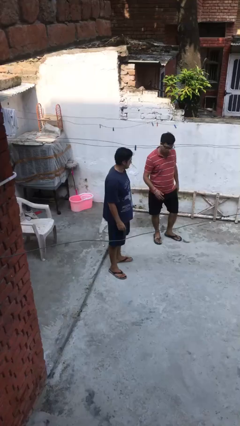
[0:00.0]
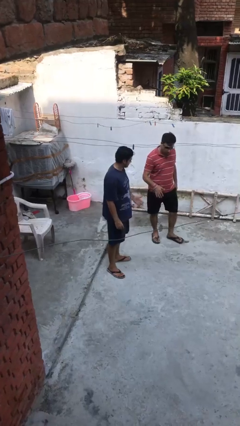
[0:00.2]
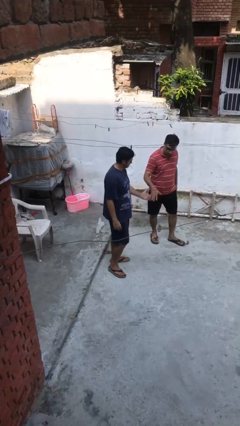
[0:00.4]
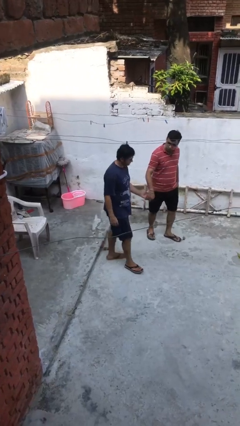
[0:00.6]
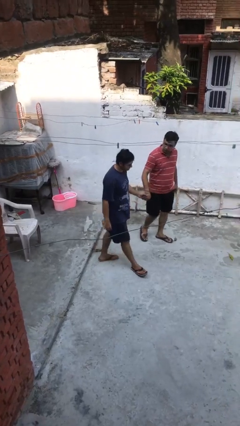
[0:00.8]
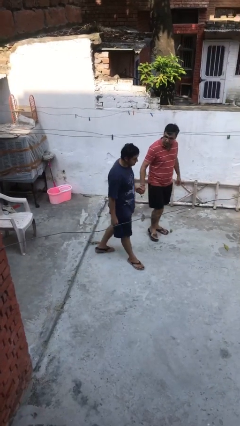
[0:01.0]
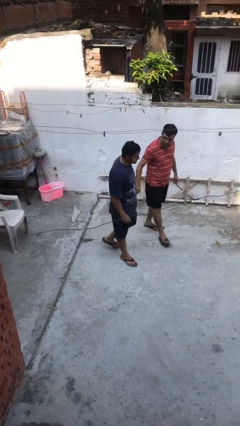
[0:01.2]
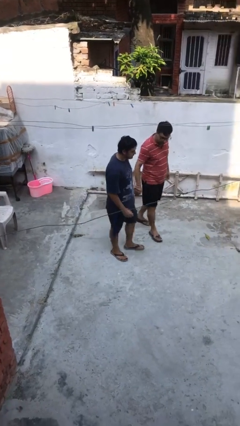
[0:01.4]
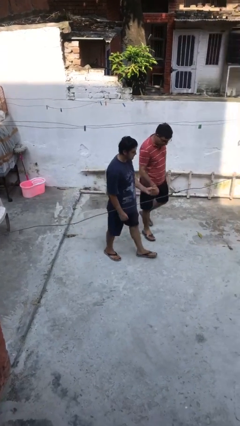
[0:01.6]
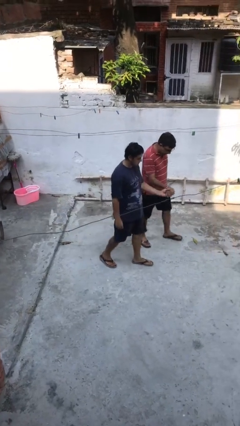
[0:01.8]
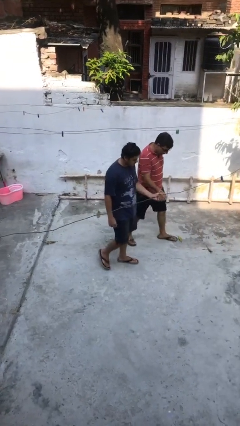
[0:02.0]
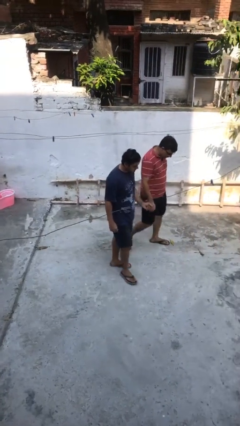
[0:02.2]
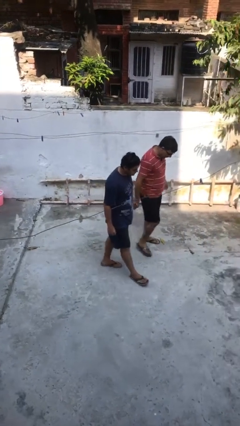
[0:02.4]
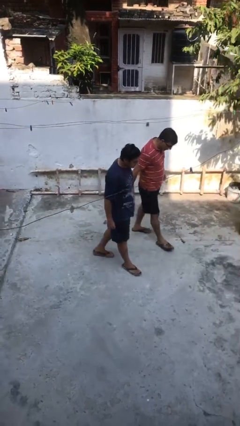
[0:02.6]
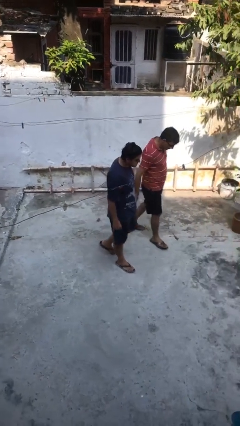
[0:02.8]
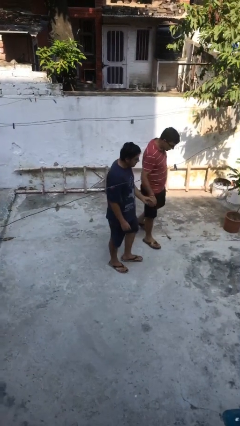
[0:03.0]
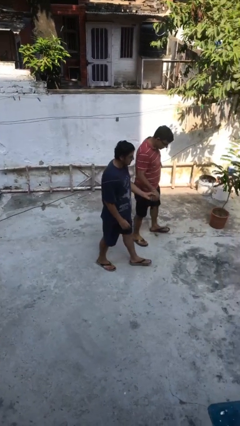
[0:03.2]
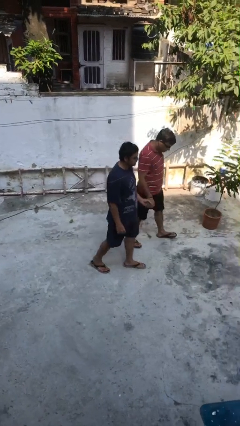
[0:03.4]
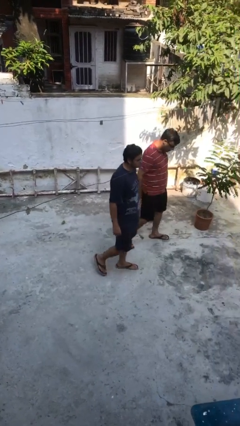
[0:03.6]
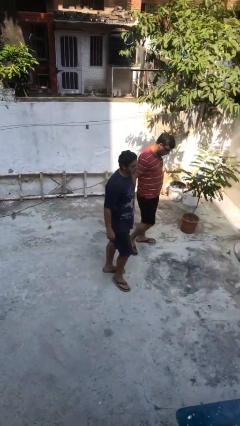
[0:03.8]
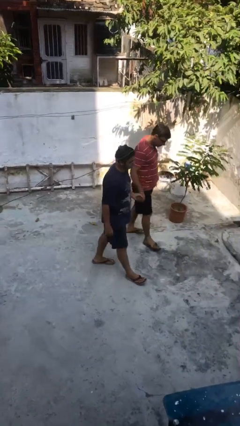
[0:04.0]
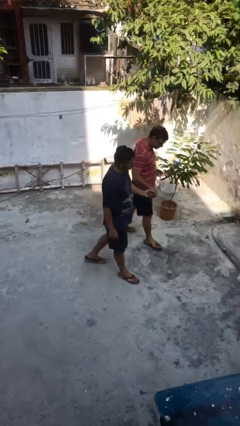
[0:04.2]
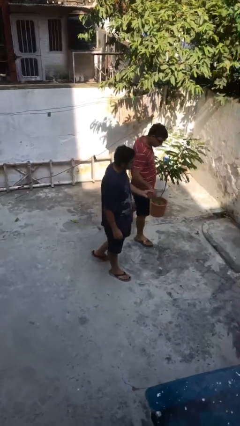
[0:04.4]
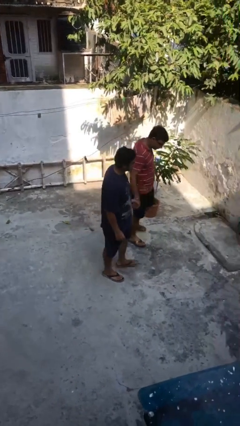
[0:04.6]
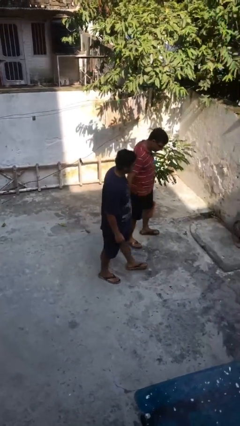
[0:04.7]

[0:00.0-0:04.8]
person holds hand

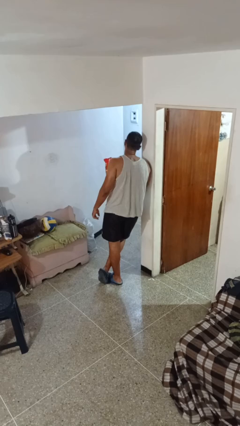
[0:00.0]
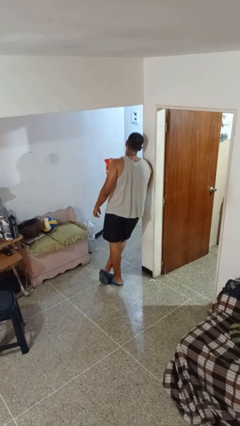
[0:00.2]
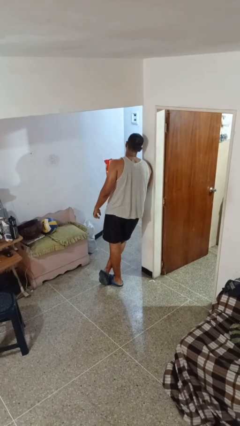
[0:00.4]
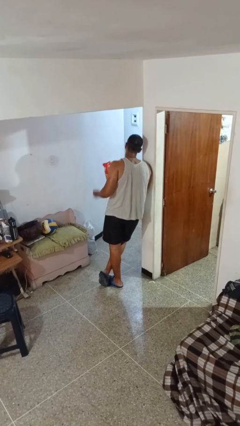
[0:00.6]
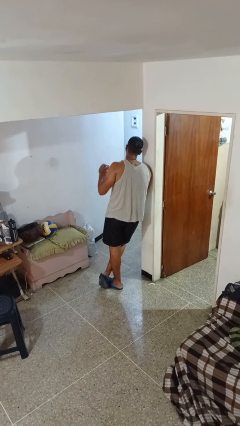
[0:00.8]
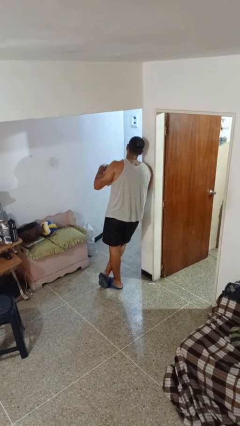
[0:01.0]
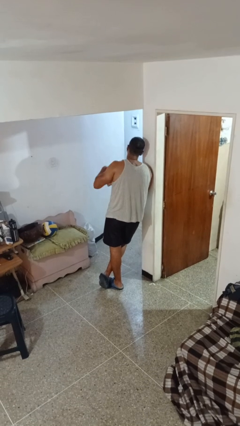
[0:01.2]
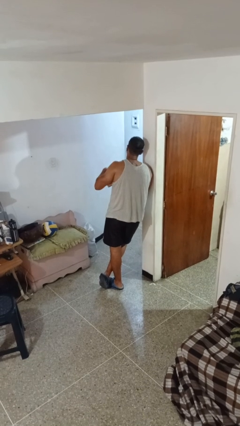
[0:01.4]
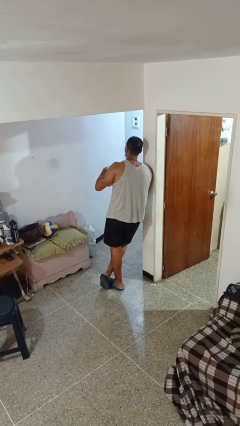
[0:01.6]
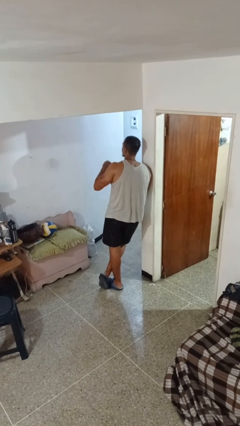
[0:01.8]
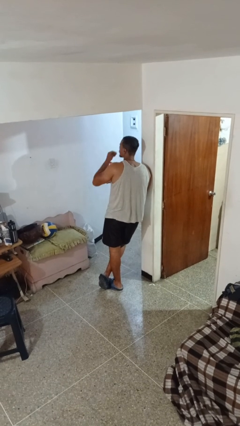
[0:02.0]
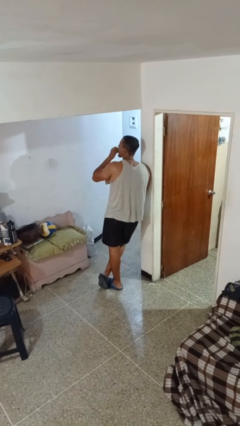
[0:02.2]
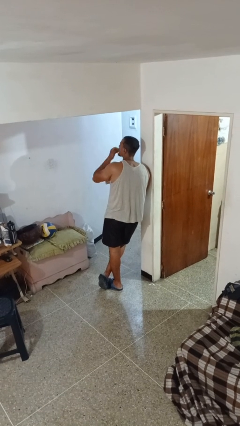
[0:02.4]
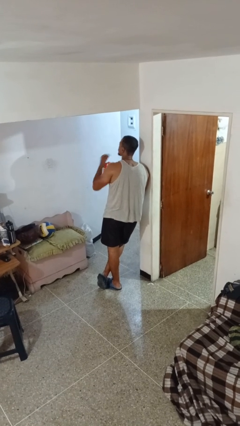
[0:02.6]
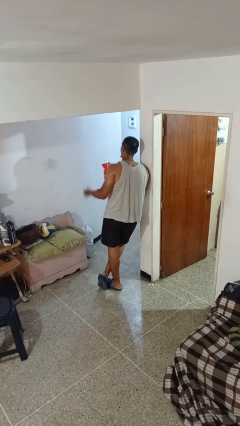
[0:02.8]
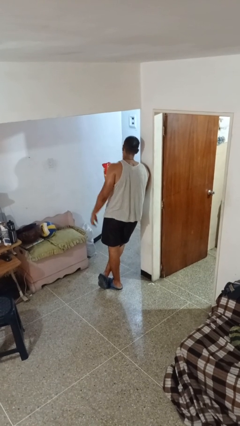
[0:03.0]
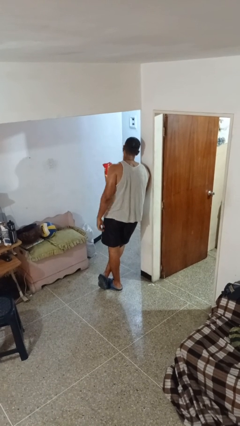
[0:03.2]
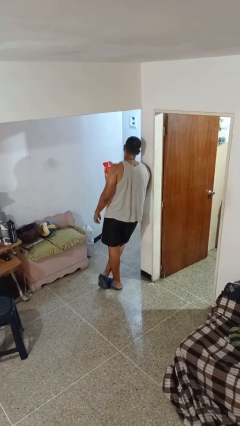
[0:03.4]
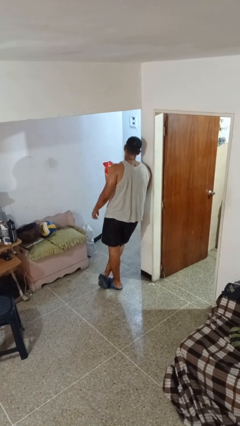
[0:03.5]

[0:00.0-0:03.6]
person eats snack from bag

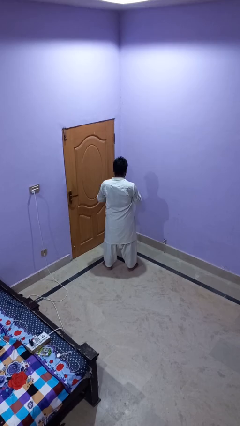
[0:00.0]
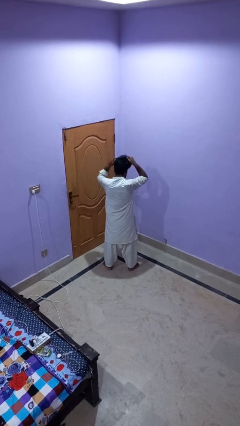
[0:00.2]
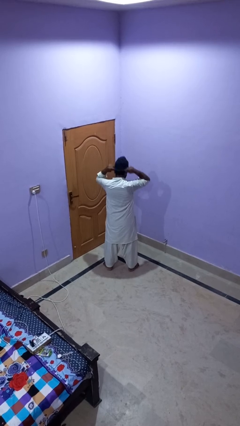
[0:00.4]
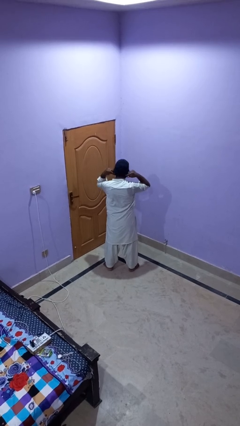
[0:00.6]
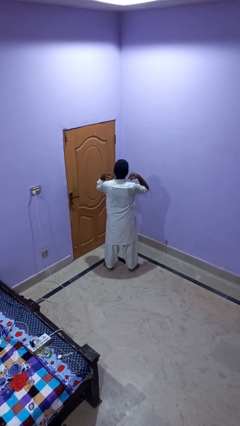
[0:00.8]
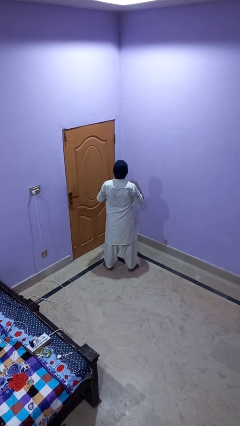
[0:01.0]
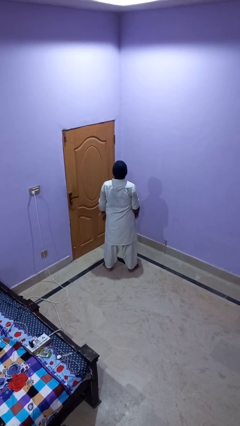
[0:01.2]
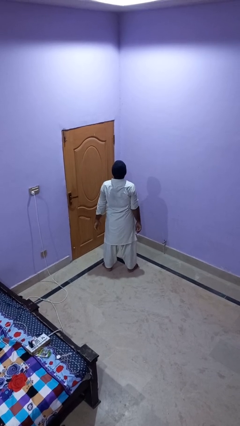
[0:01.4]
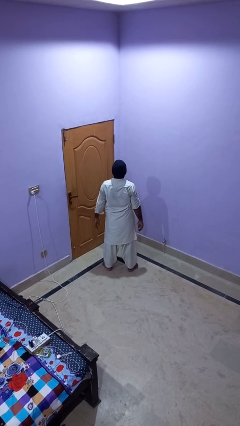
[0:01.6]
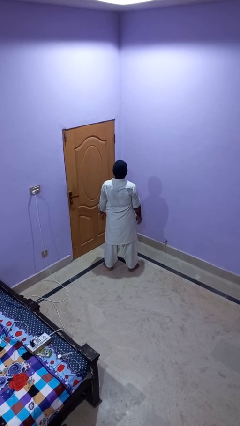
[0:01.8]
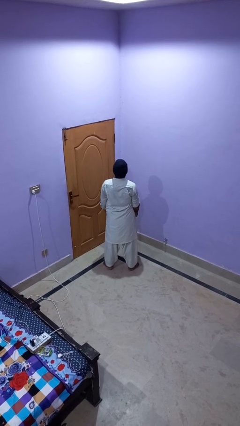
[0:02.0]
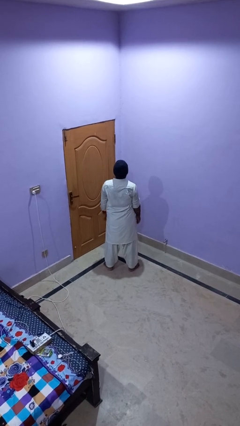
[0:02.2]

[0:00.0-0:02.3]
person puts on hat

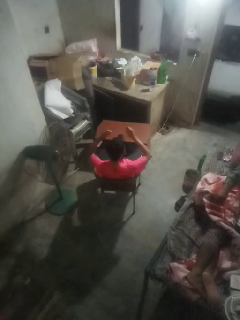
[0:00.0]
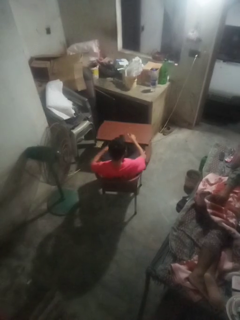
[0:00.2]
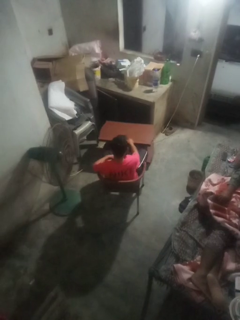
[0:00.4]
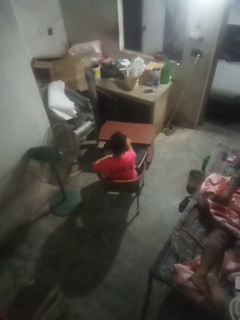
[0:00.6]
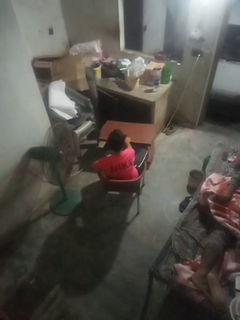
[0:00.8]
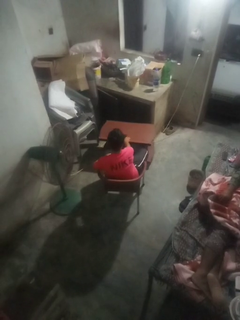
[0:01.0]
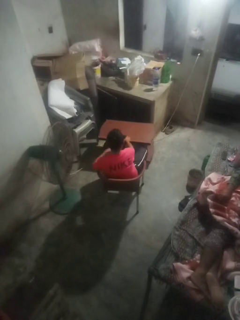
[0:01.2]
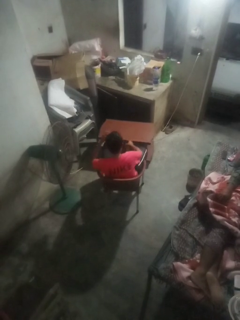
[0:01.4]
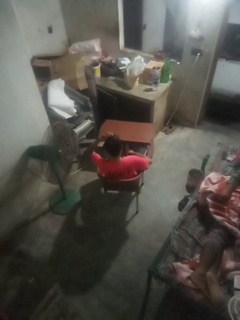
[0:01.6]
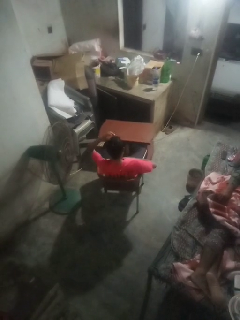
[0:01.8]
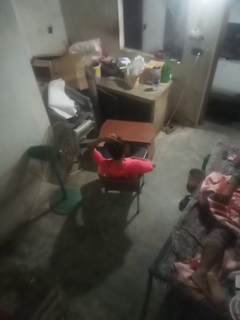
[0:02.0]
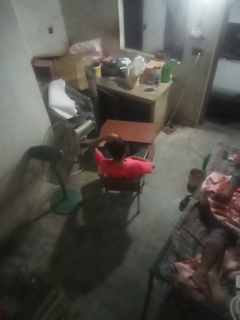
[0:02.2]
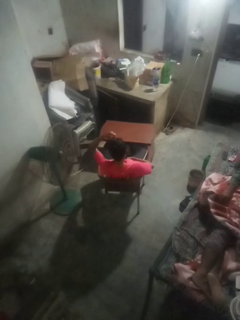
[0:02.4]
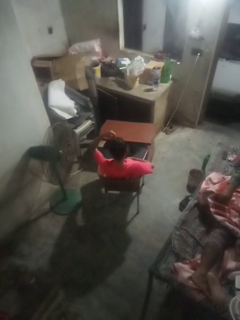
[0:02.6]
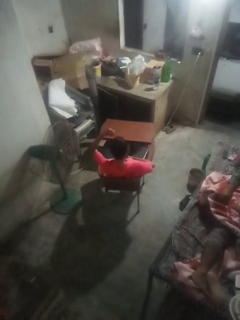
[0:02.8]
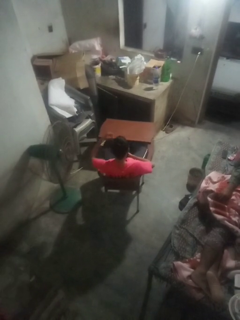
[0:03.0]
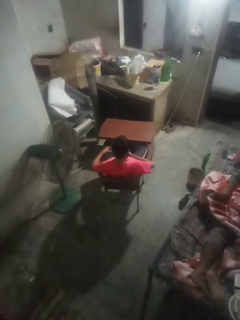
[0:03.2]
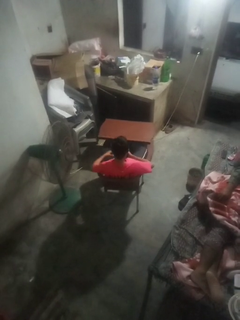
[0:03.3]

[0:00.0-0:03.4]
person takes off hairtie

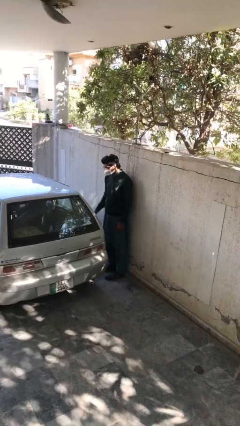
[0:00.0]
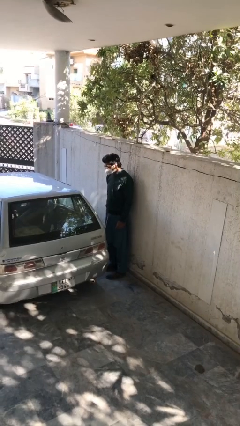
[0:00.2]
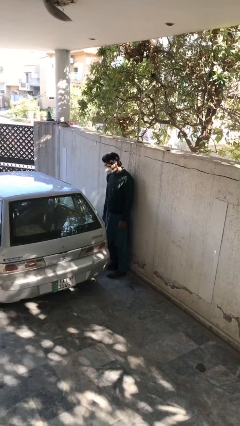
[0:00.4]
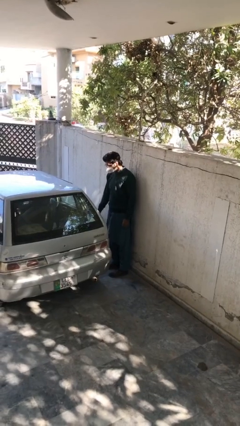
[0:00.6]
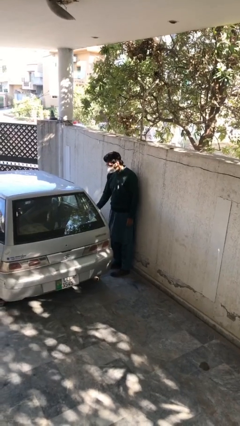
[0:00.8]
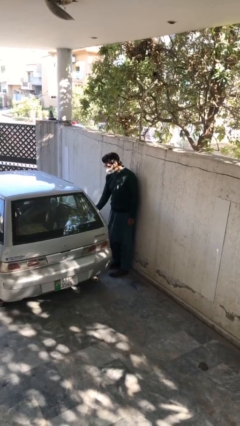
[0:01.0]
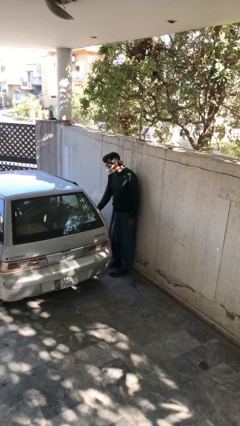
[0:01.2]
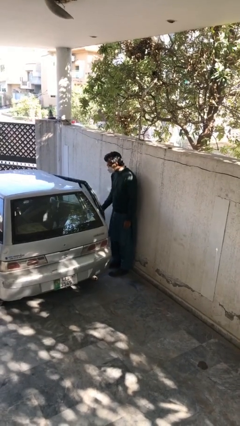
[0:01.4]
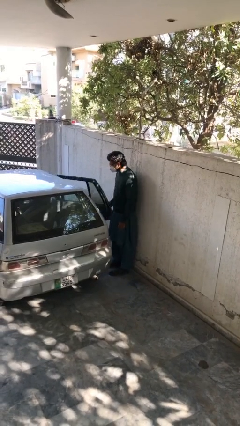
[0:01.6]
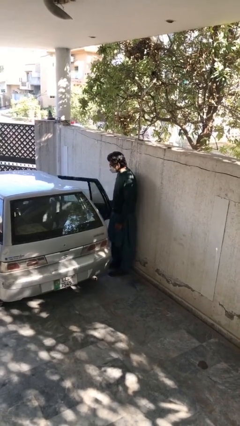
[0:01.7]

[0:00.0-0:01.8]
person opens car door

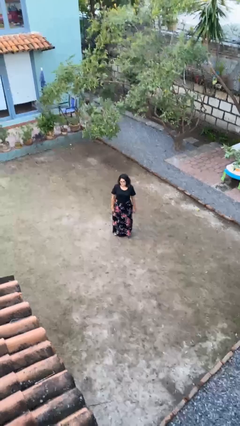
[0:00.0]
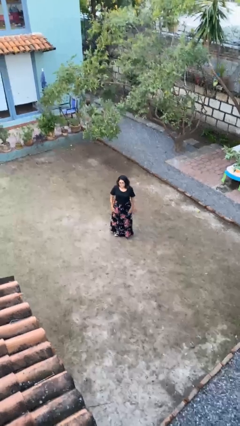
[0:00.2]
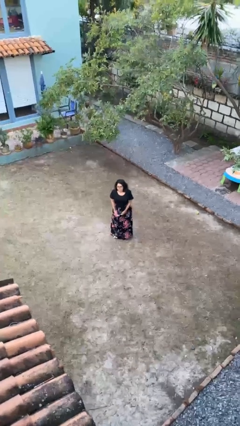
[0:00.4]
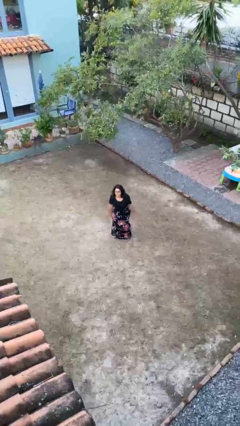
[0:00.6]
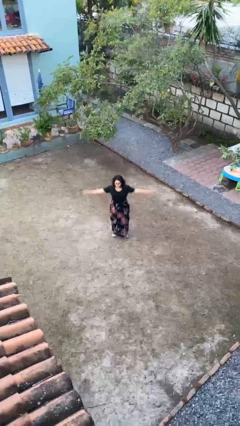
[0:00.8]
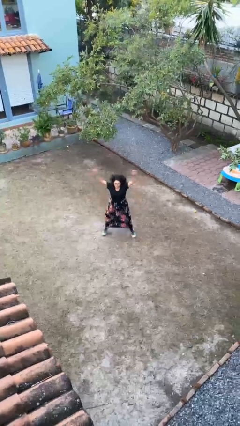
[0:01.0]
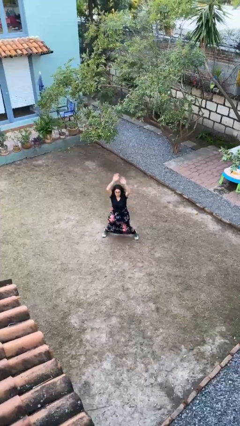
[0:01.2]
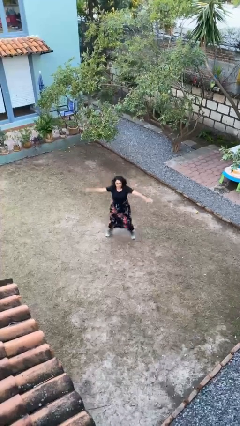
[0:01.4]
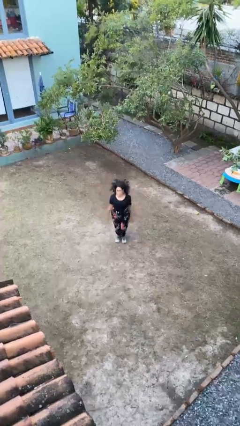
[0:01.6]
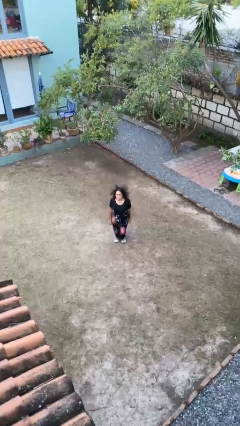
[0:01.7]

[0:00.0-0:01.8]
person exercises with jumping jacks

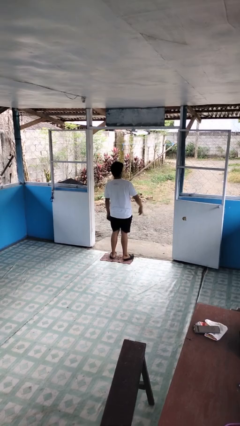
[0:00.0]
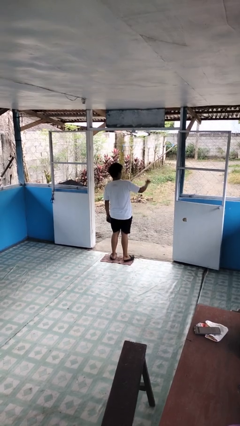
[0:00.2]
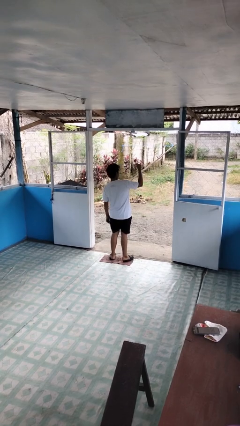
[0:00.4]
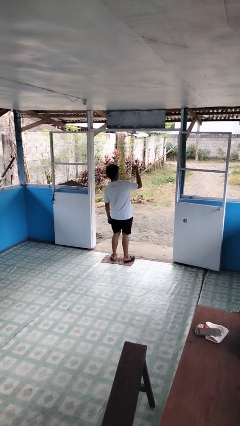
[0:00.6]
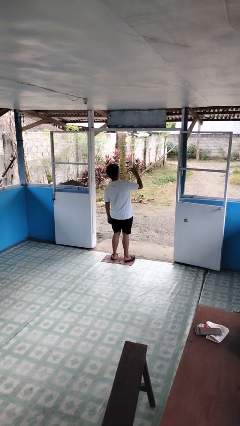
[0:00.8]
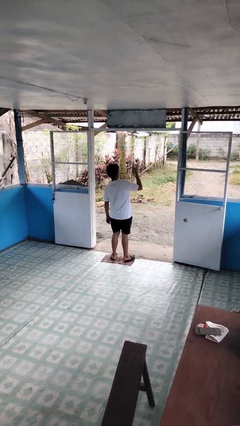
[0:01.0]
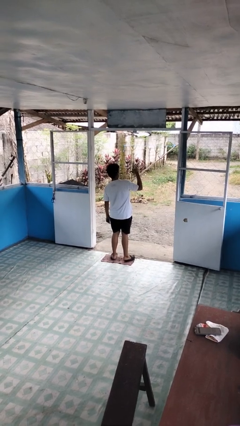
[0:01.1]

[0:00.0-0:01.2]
person gestures hang loose
